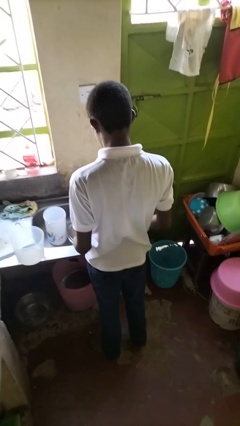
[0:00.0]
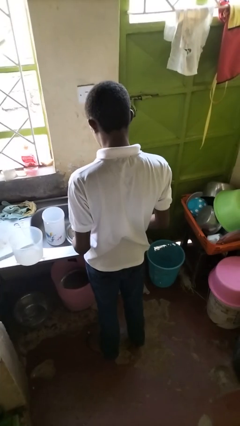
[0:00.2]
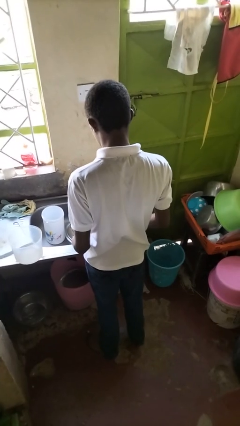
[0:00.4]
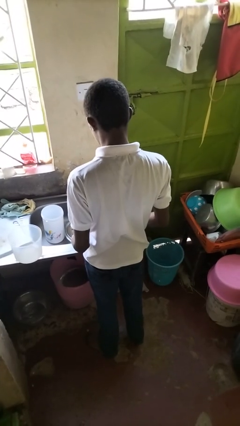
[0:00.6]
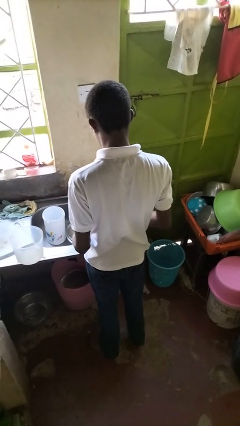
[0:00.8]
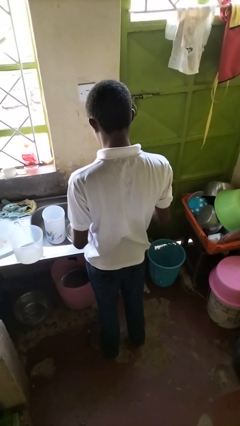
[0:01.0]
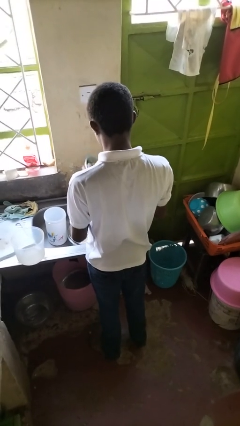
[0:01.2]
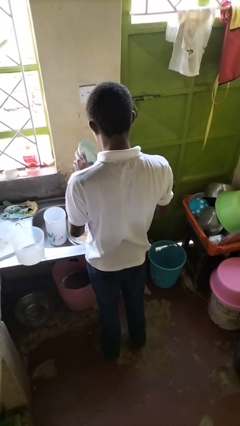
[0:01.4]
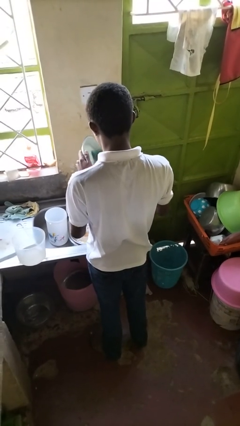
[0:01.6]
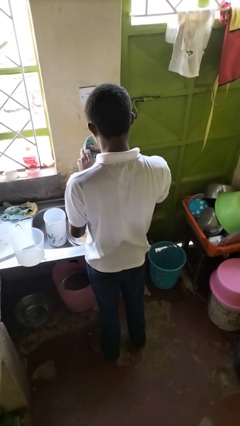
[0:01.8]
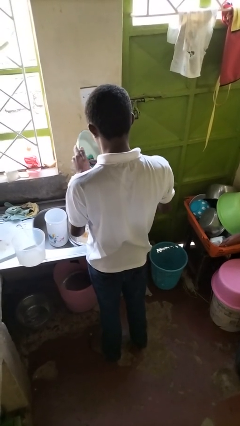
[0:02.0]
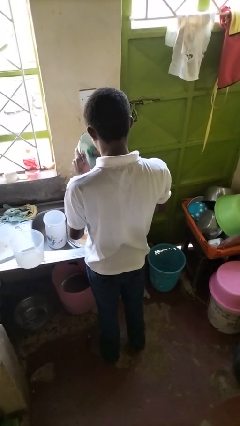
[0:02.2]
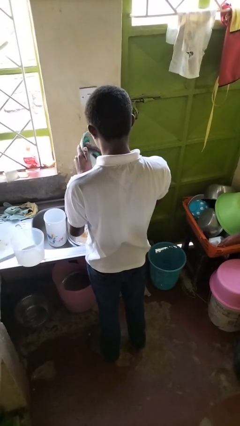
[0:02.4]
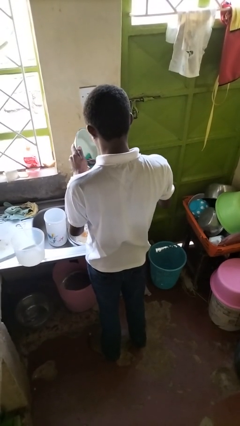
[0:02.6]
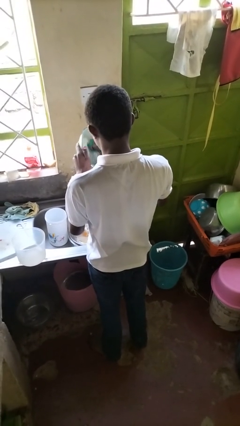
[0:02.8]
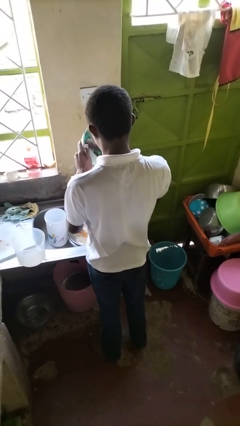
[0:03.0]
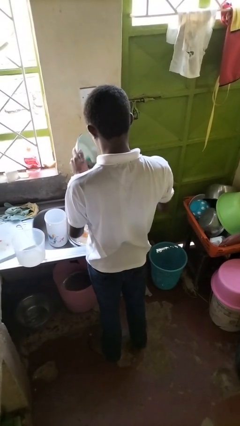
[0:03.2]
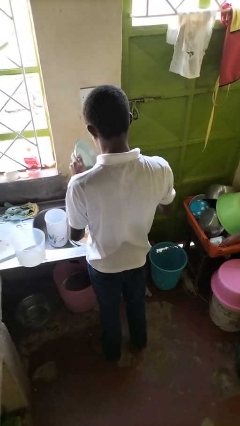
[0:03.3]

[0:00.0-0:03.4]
person washes dish

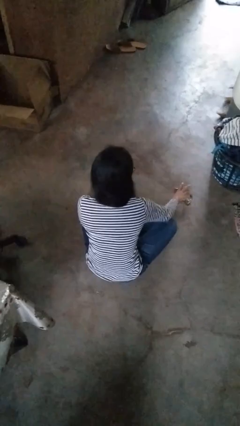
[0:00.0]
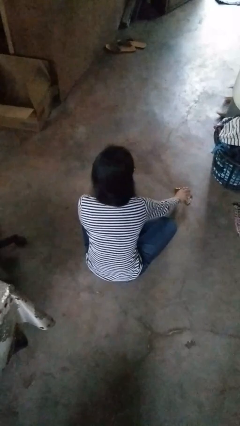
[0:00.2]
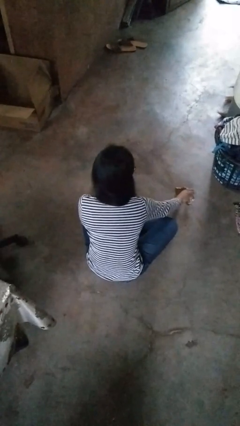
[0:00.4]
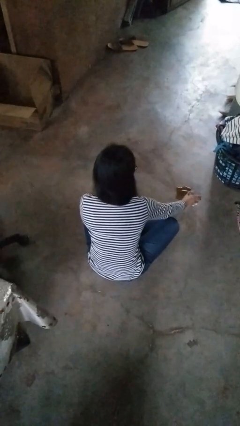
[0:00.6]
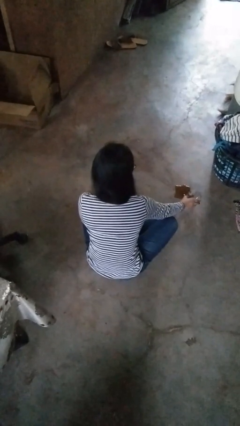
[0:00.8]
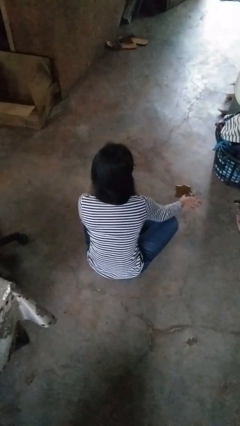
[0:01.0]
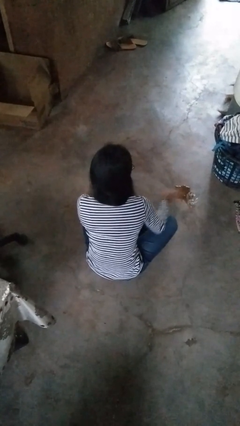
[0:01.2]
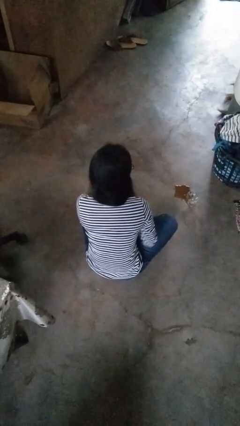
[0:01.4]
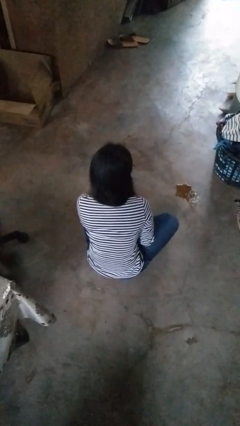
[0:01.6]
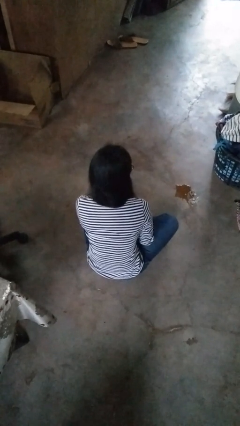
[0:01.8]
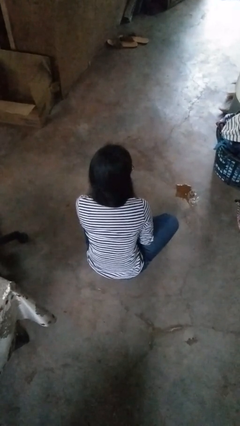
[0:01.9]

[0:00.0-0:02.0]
person sets upright glass

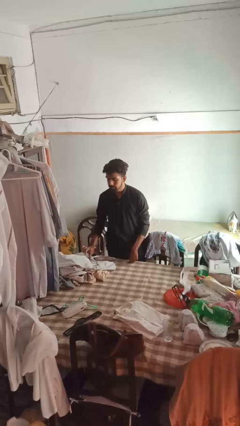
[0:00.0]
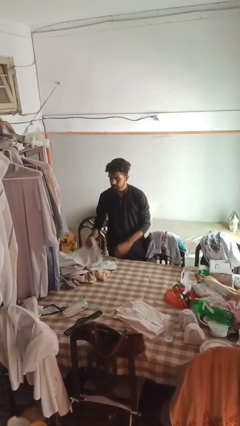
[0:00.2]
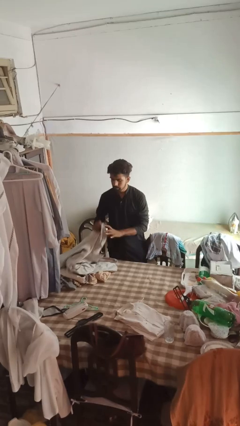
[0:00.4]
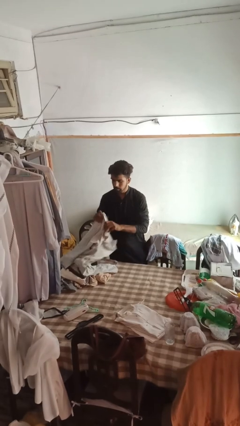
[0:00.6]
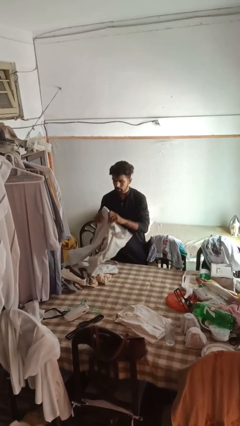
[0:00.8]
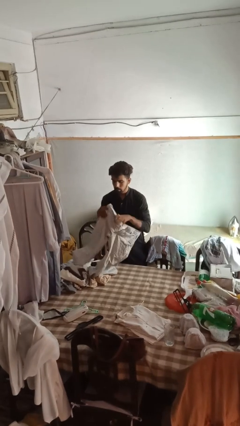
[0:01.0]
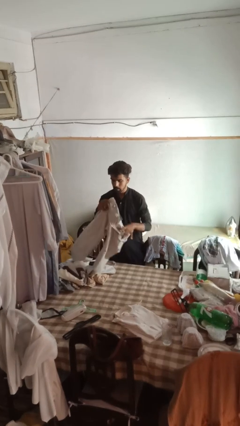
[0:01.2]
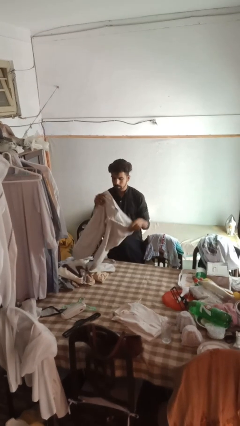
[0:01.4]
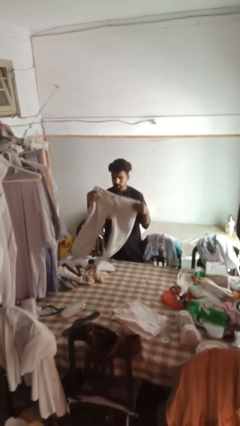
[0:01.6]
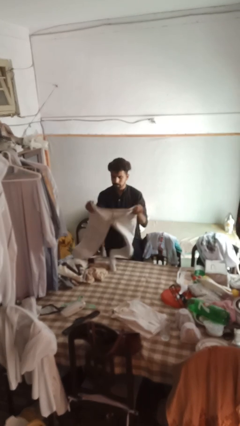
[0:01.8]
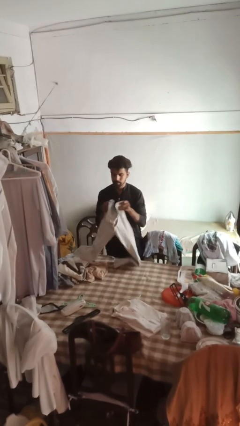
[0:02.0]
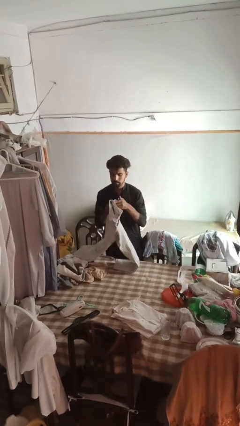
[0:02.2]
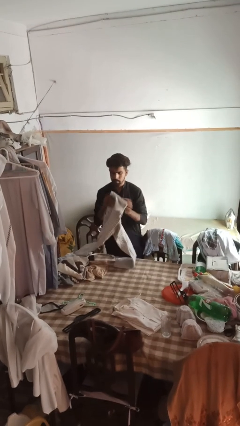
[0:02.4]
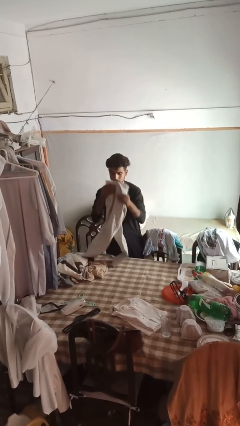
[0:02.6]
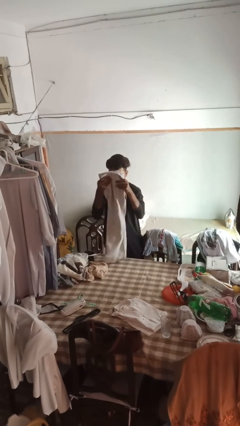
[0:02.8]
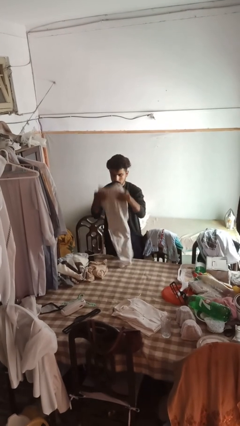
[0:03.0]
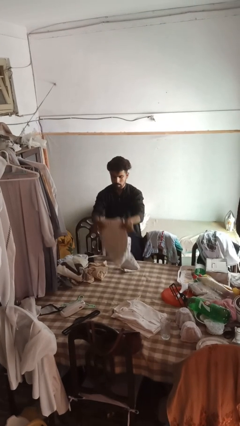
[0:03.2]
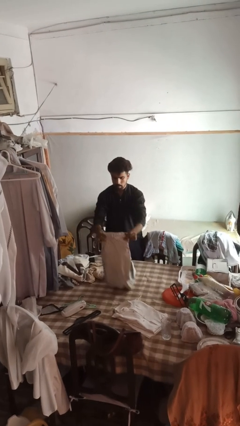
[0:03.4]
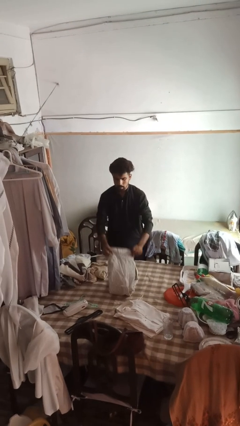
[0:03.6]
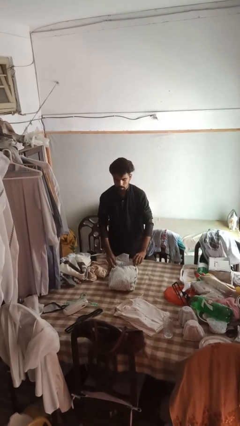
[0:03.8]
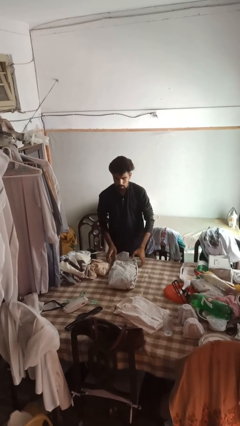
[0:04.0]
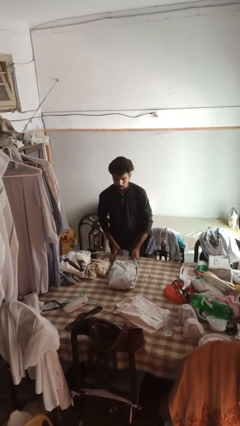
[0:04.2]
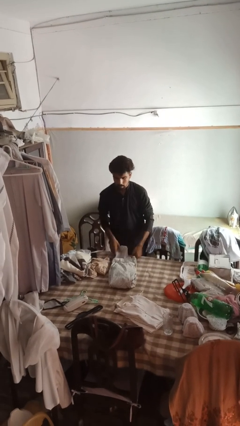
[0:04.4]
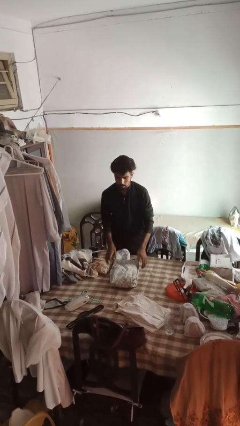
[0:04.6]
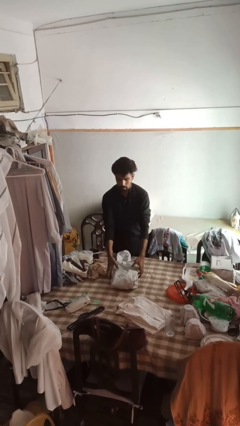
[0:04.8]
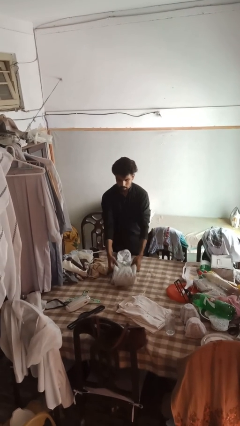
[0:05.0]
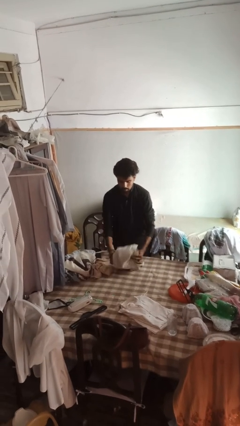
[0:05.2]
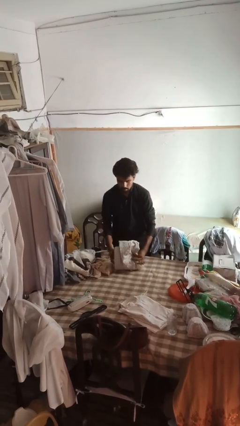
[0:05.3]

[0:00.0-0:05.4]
person folds socks

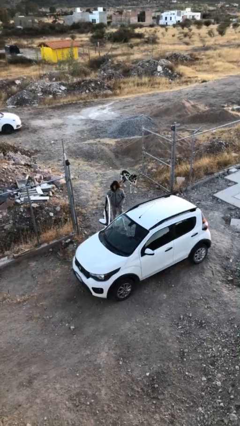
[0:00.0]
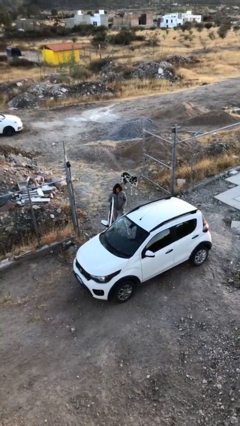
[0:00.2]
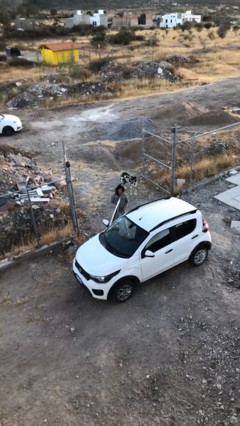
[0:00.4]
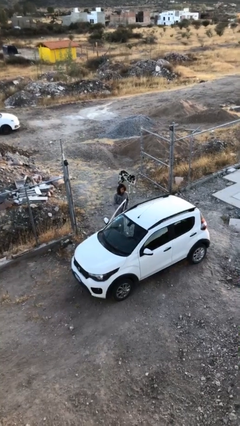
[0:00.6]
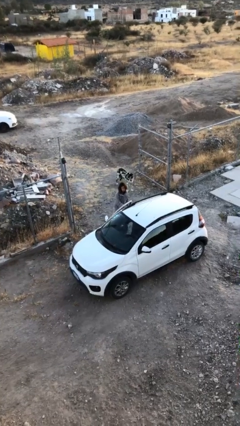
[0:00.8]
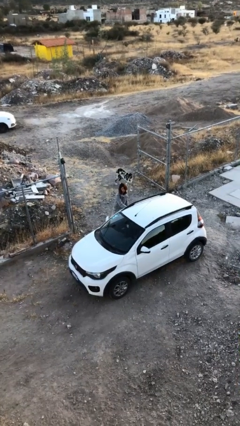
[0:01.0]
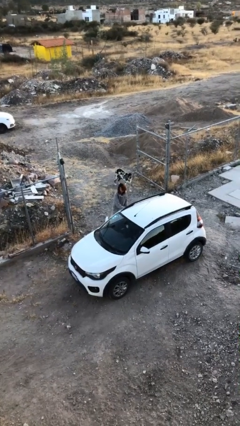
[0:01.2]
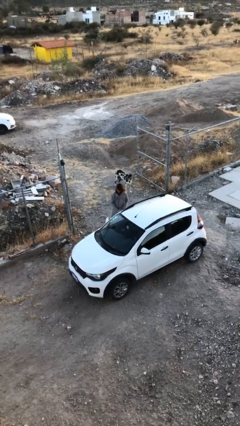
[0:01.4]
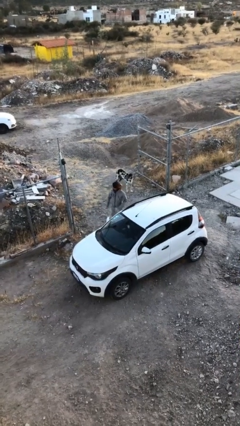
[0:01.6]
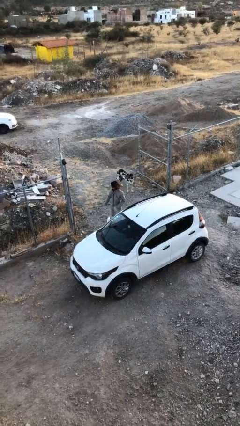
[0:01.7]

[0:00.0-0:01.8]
person closes car door

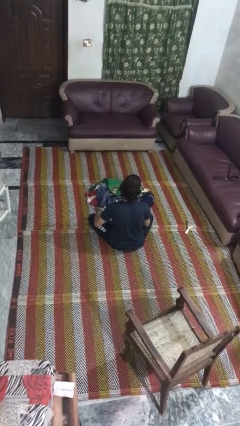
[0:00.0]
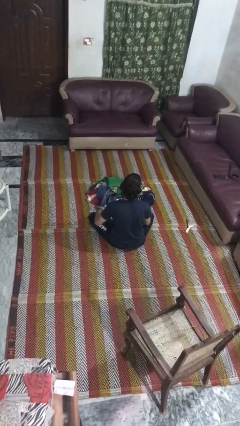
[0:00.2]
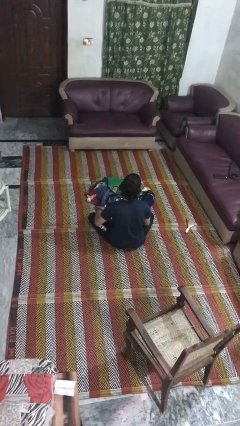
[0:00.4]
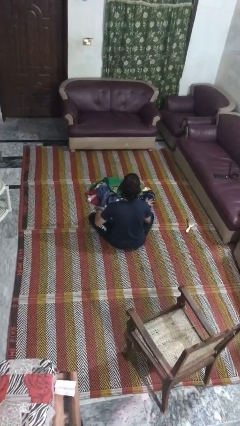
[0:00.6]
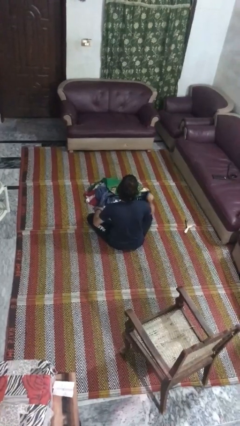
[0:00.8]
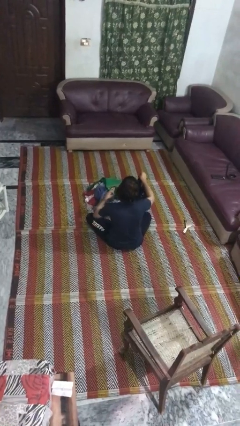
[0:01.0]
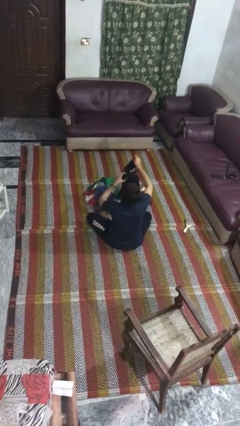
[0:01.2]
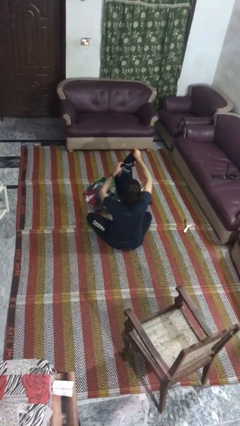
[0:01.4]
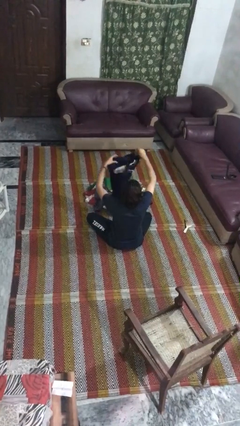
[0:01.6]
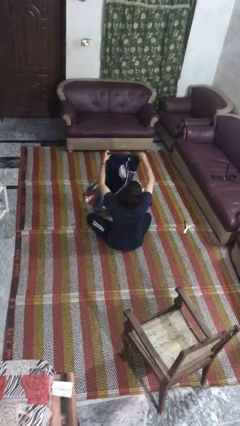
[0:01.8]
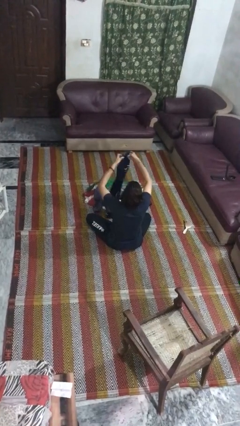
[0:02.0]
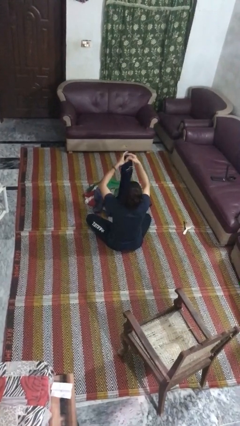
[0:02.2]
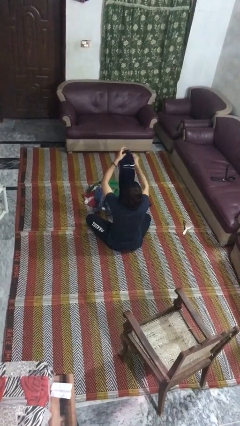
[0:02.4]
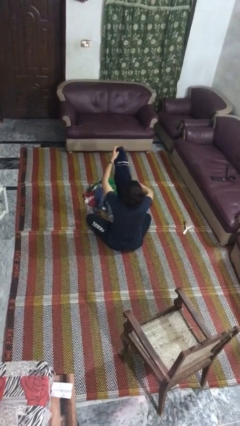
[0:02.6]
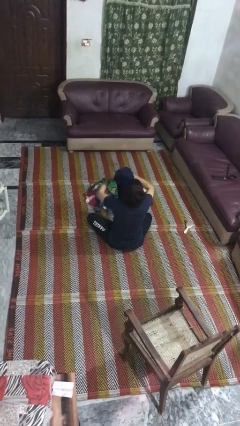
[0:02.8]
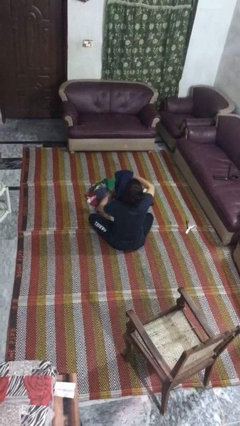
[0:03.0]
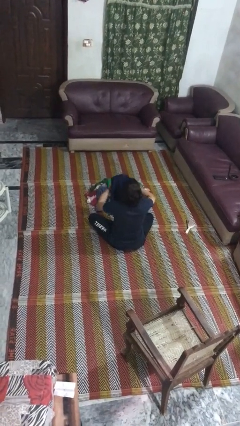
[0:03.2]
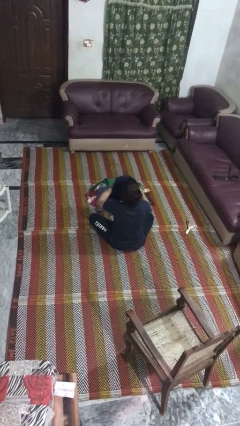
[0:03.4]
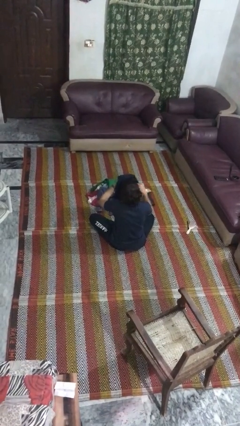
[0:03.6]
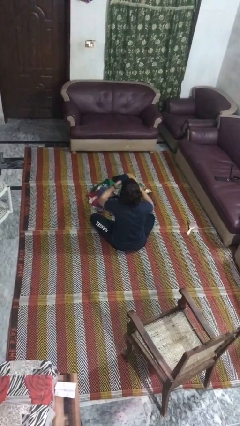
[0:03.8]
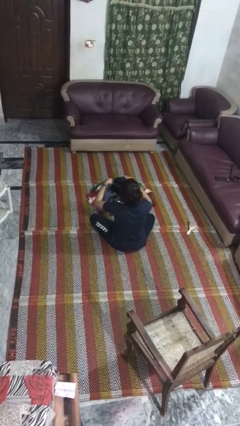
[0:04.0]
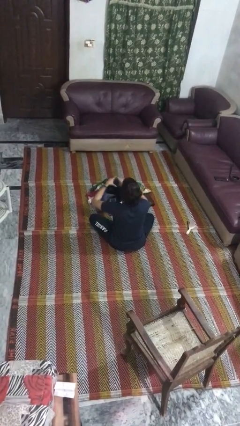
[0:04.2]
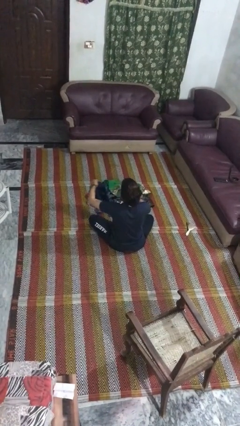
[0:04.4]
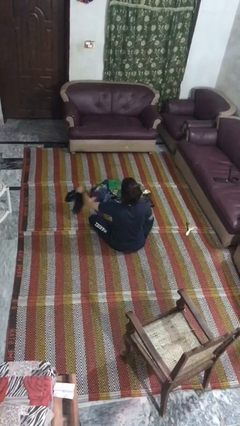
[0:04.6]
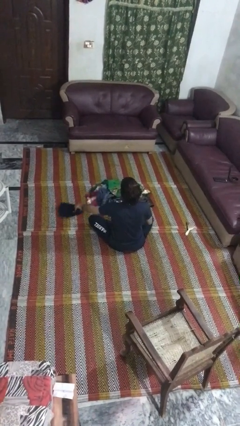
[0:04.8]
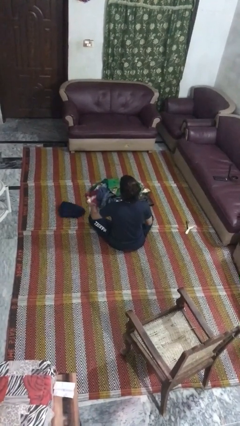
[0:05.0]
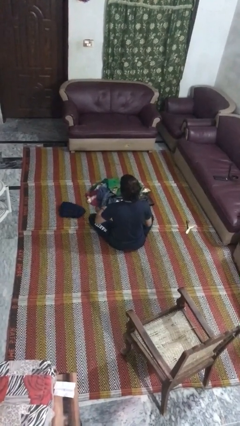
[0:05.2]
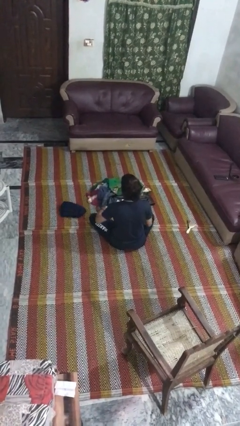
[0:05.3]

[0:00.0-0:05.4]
person folds pants
